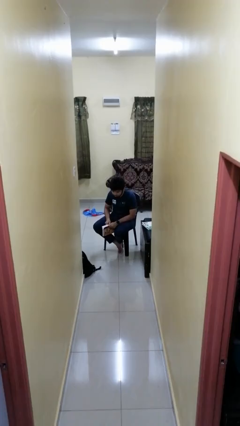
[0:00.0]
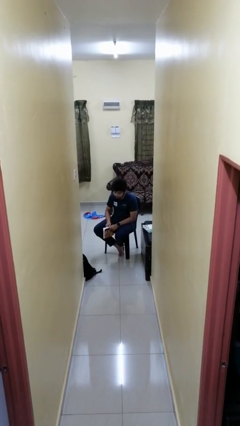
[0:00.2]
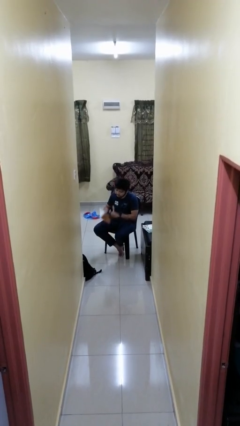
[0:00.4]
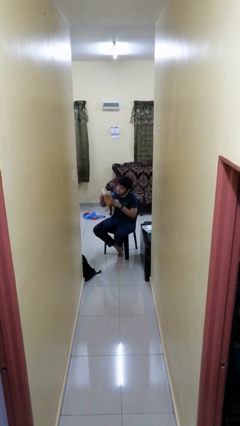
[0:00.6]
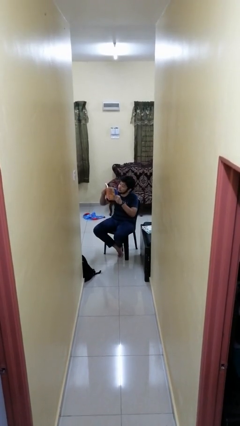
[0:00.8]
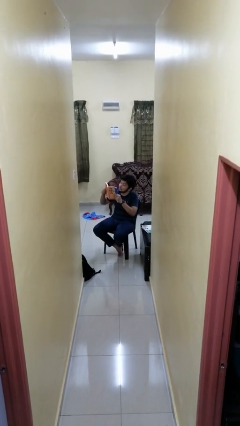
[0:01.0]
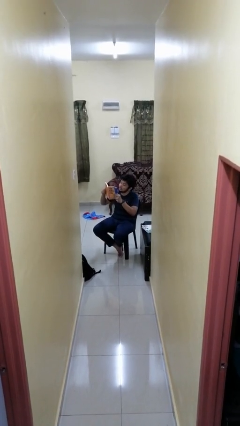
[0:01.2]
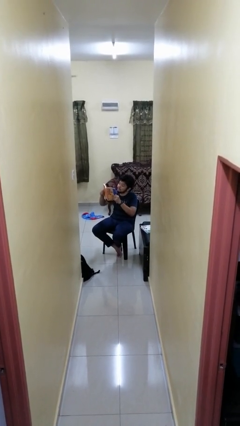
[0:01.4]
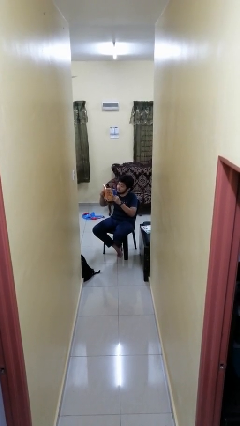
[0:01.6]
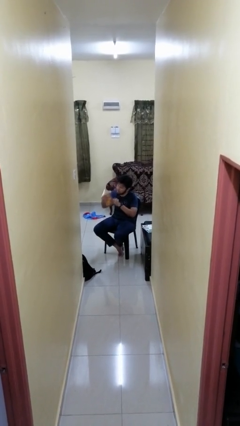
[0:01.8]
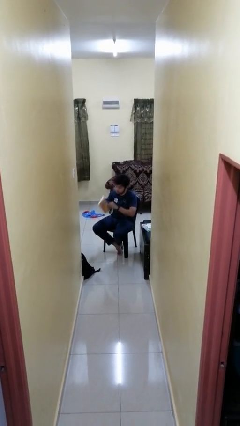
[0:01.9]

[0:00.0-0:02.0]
person reads book

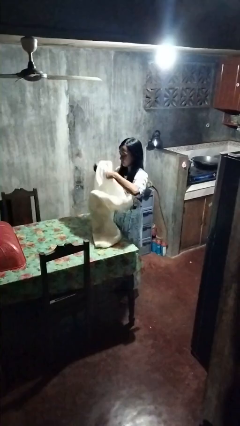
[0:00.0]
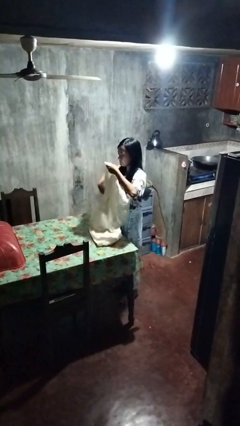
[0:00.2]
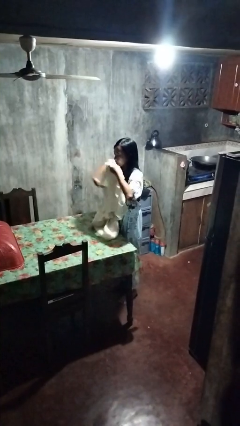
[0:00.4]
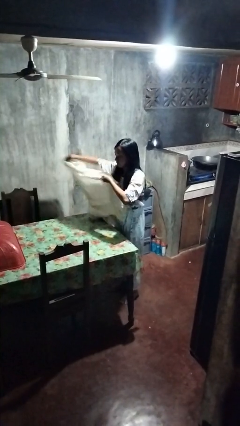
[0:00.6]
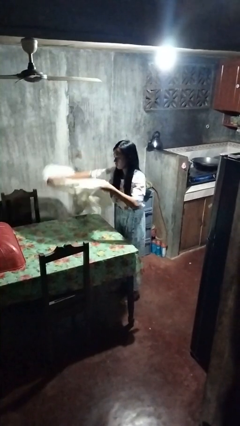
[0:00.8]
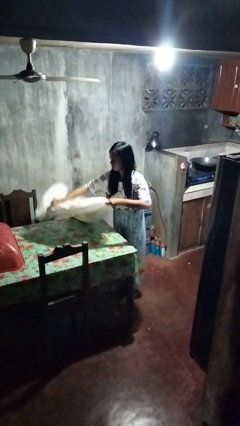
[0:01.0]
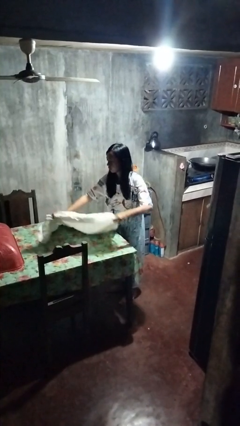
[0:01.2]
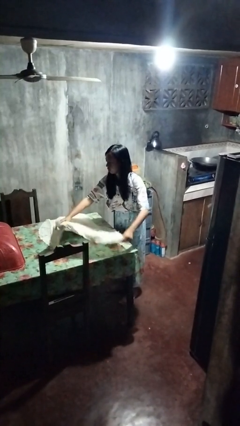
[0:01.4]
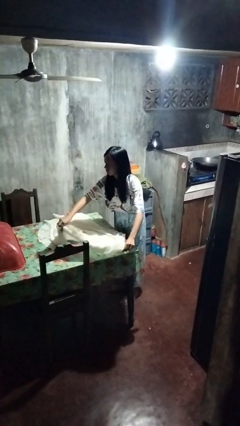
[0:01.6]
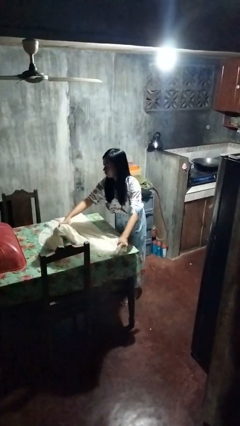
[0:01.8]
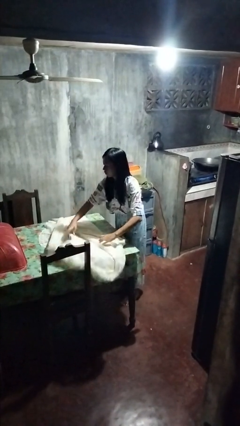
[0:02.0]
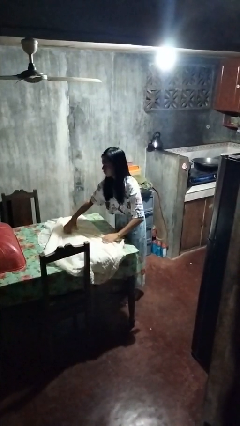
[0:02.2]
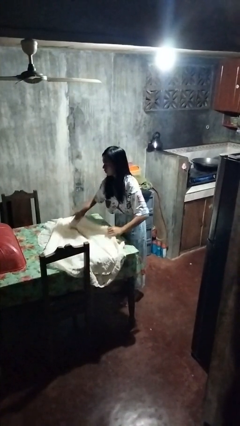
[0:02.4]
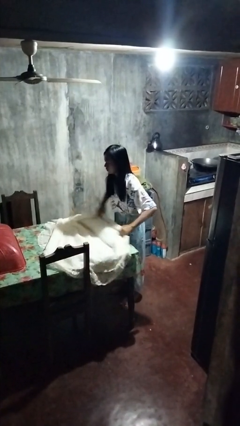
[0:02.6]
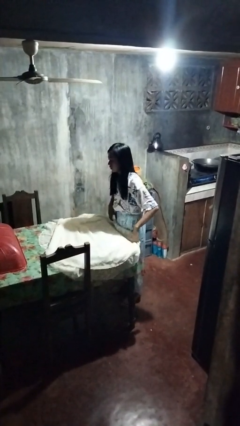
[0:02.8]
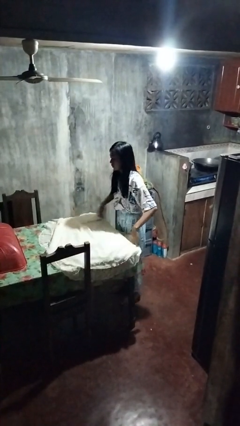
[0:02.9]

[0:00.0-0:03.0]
person spreads tablecloth

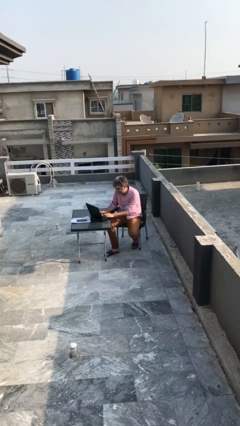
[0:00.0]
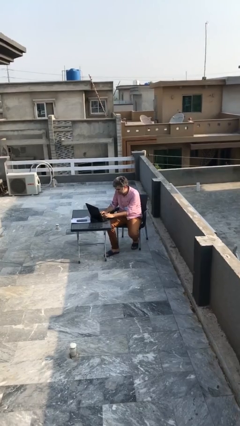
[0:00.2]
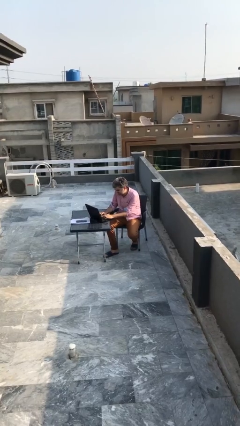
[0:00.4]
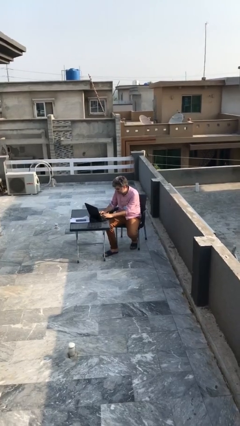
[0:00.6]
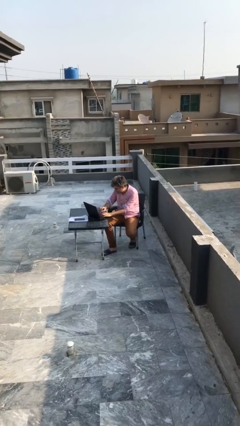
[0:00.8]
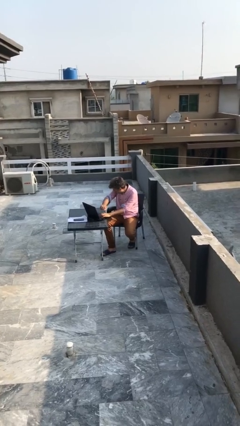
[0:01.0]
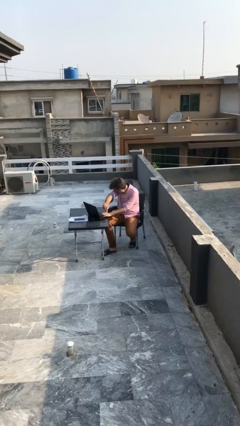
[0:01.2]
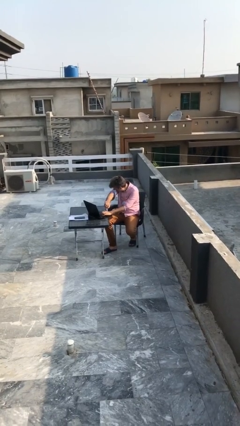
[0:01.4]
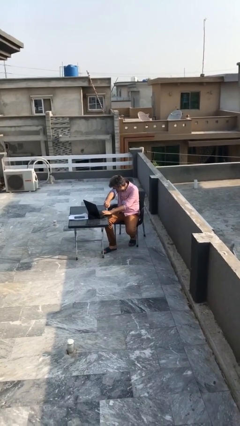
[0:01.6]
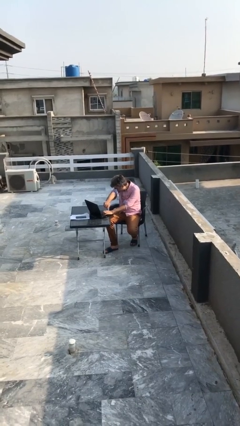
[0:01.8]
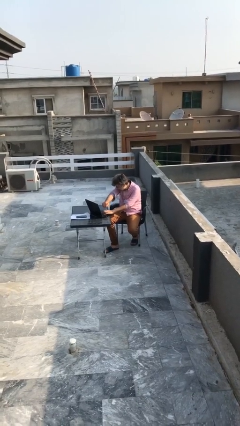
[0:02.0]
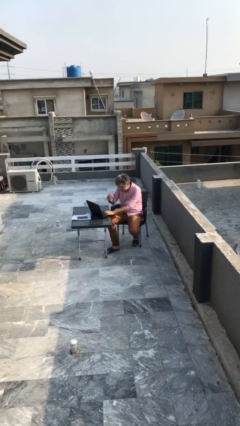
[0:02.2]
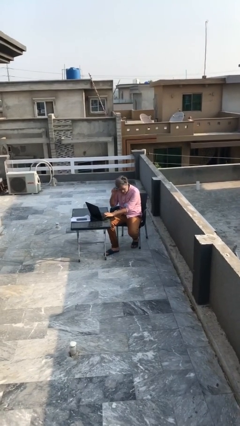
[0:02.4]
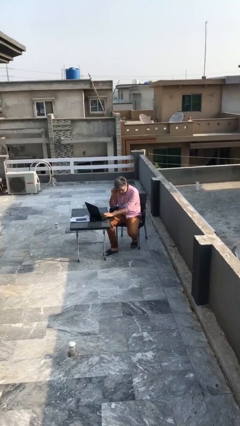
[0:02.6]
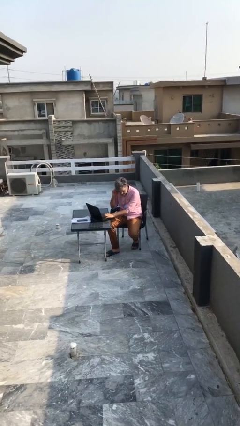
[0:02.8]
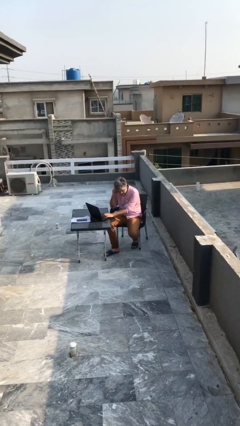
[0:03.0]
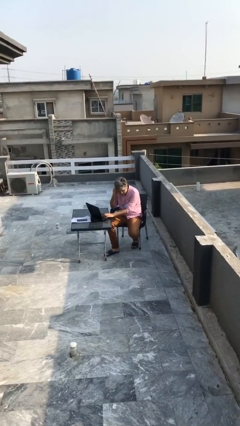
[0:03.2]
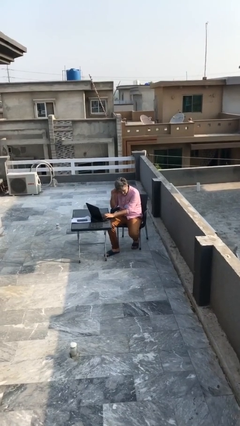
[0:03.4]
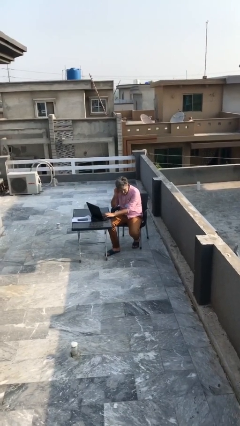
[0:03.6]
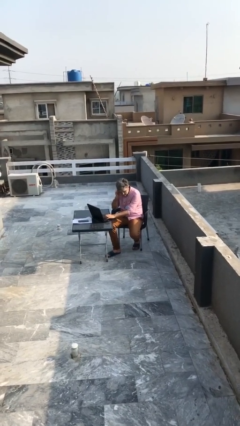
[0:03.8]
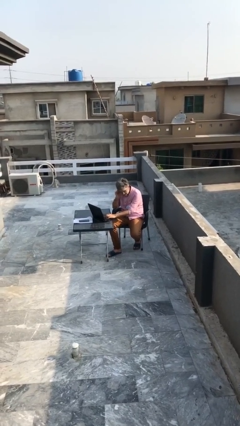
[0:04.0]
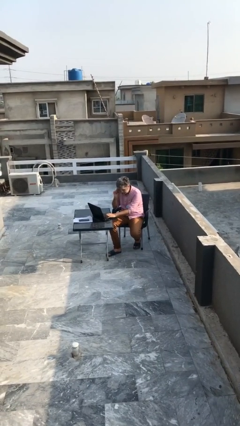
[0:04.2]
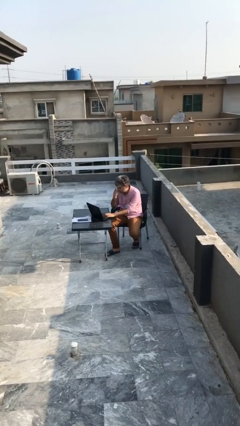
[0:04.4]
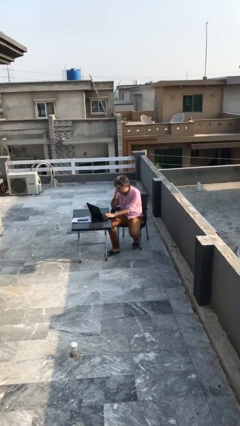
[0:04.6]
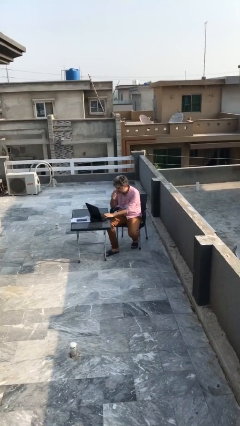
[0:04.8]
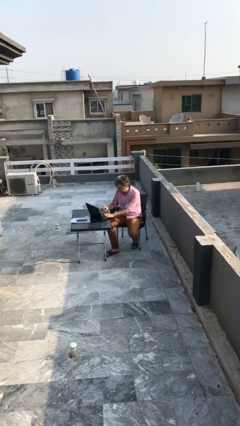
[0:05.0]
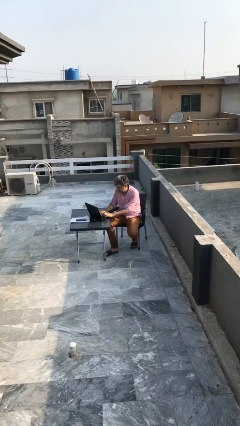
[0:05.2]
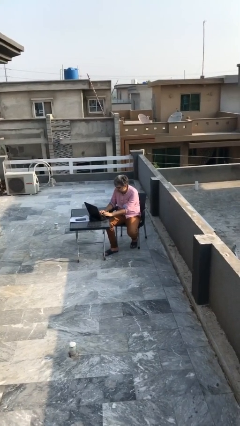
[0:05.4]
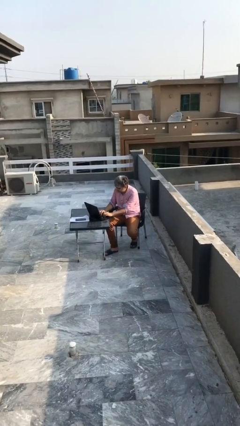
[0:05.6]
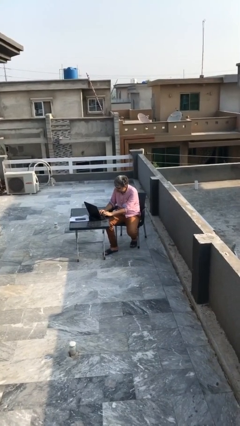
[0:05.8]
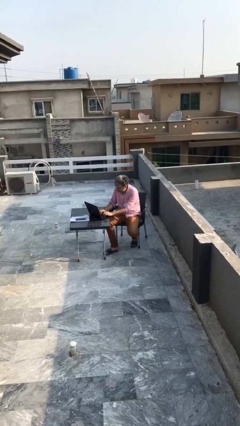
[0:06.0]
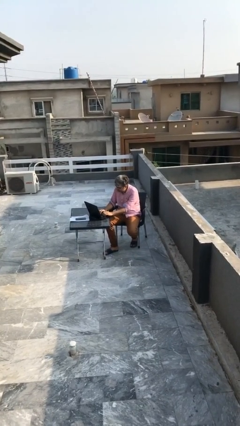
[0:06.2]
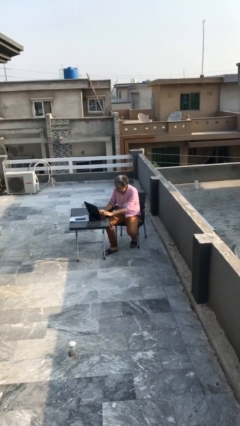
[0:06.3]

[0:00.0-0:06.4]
person interacts with laptop

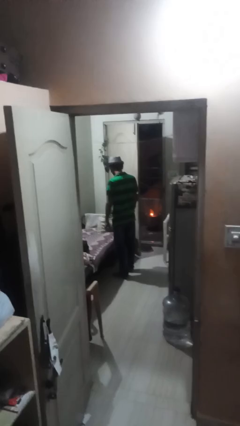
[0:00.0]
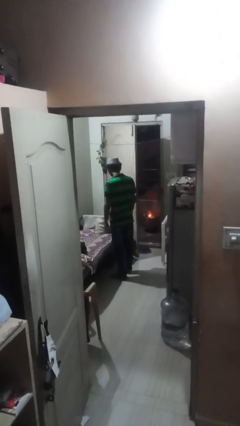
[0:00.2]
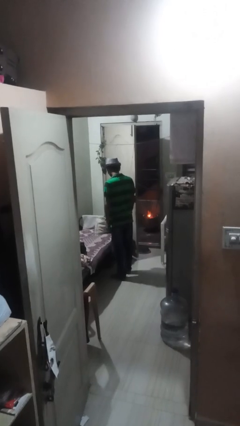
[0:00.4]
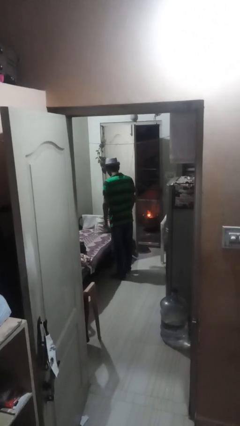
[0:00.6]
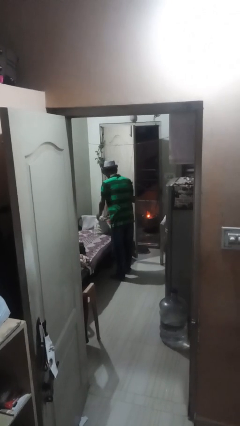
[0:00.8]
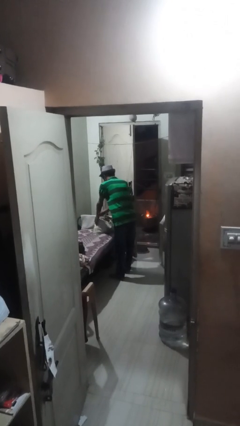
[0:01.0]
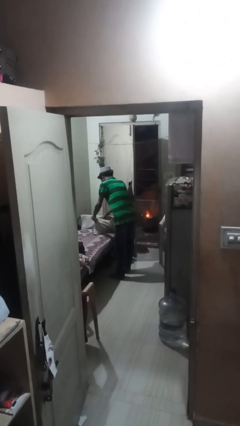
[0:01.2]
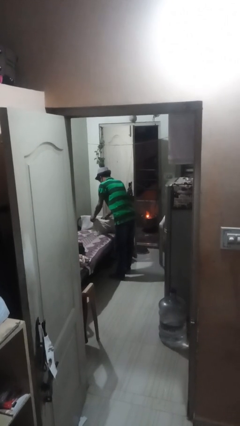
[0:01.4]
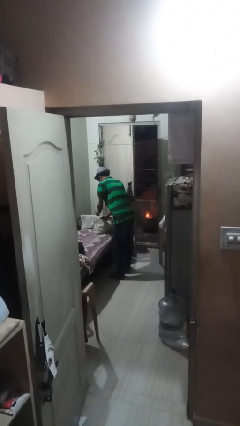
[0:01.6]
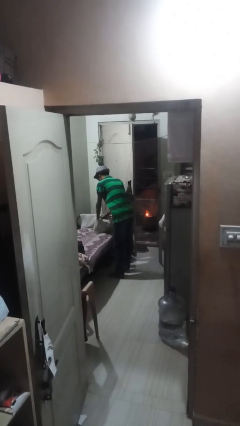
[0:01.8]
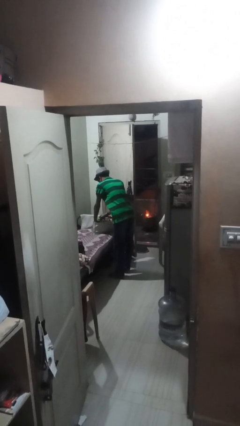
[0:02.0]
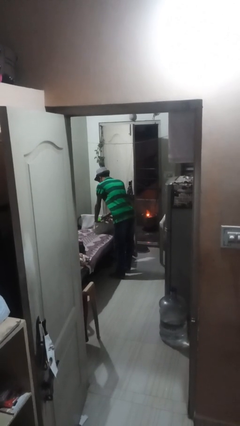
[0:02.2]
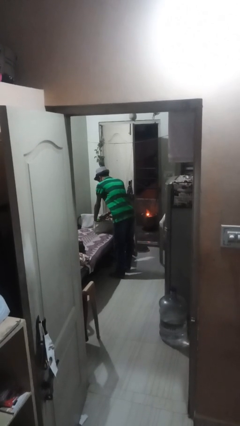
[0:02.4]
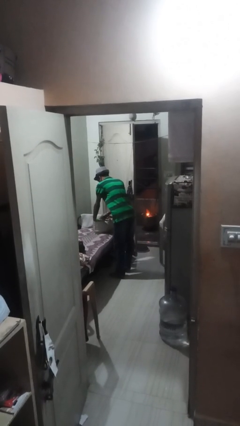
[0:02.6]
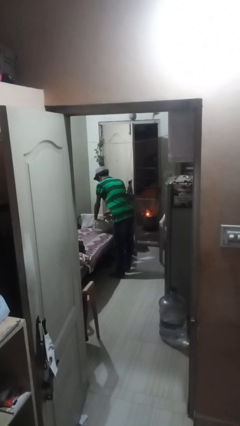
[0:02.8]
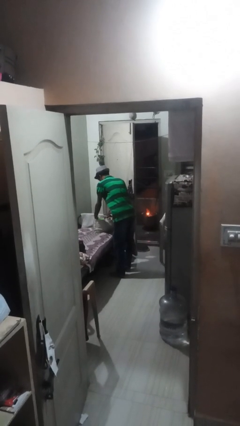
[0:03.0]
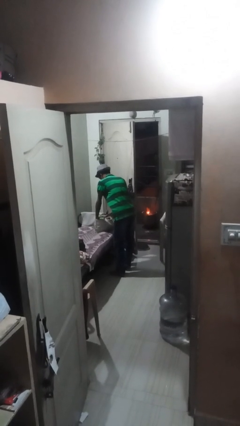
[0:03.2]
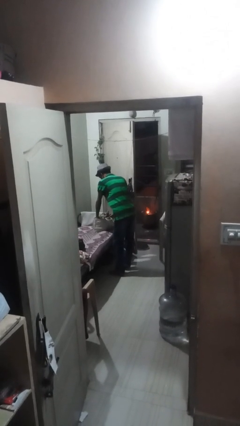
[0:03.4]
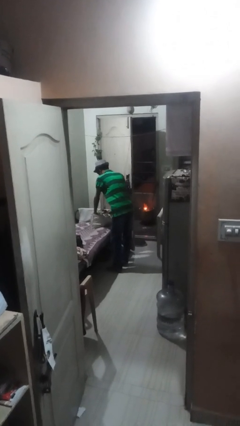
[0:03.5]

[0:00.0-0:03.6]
person searches in bag

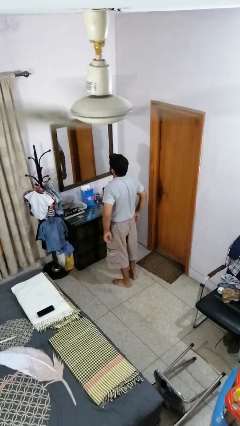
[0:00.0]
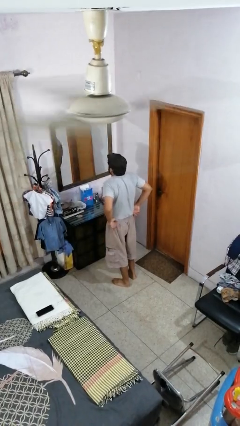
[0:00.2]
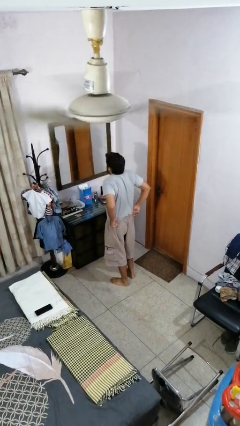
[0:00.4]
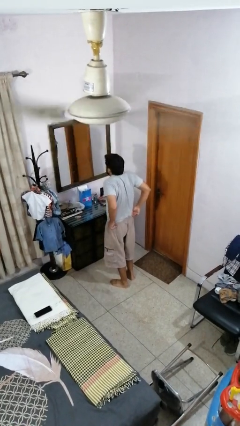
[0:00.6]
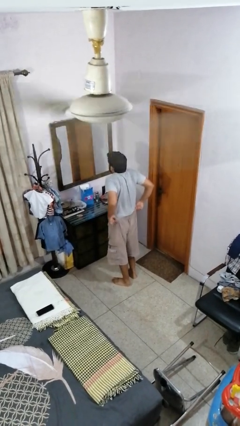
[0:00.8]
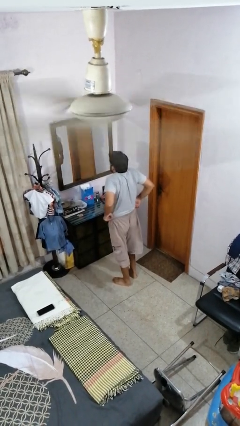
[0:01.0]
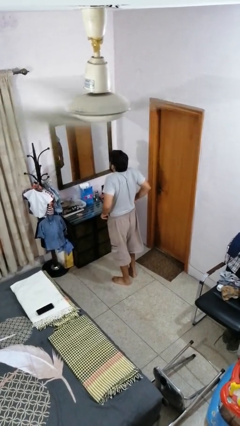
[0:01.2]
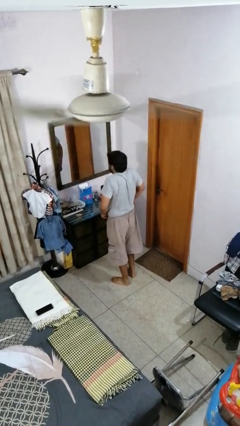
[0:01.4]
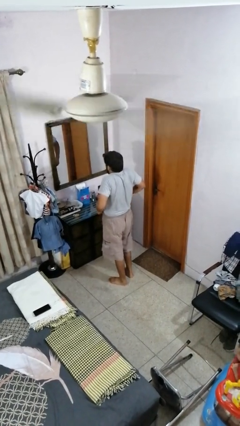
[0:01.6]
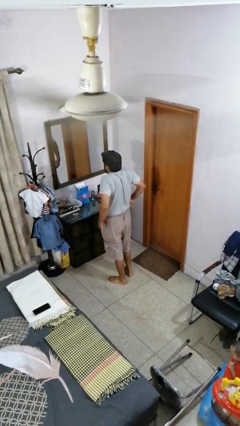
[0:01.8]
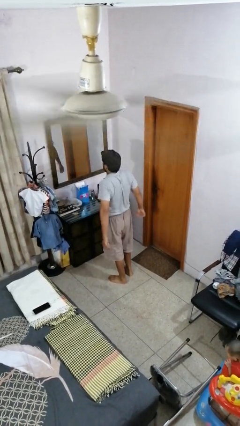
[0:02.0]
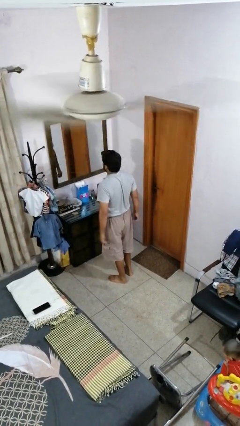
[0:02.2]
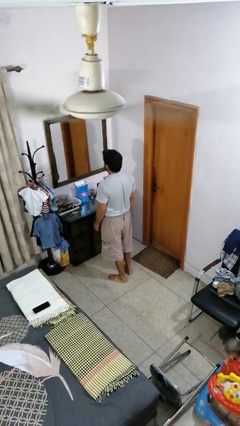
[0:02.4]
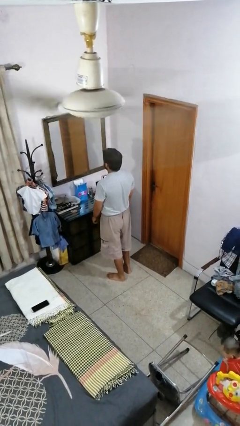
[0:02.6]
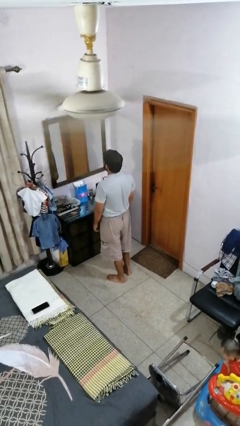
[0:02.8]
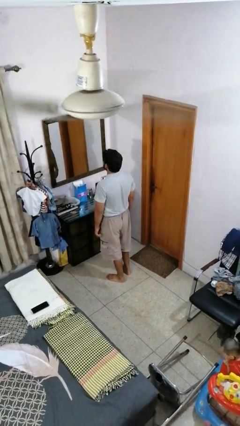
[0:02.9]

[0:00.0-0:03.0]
person hikes up pants
